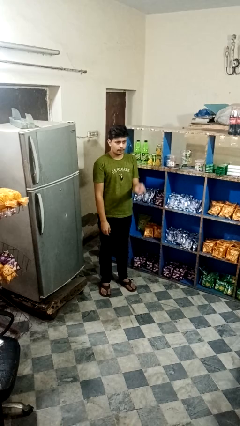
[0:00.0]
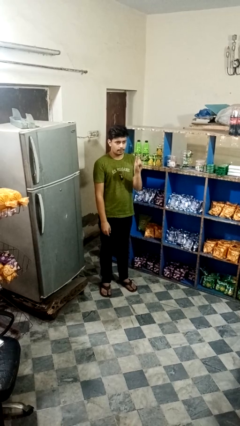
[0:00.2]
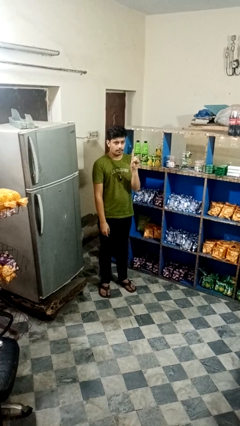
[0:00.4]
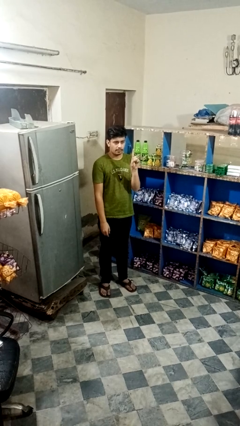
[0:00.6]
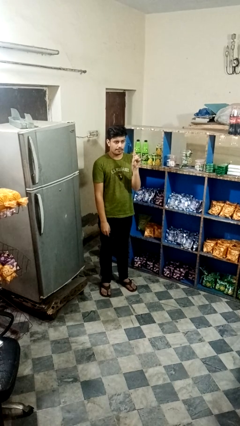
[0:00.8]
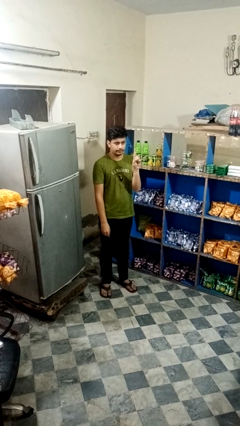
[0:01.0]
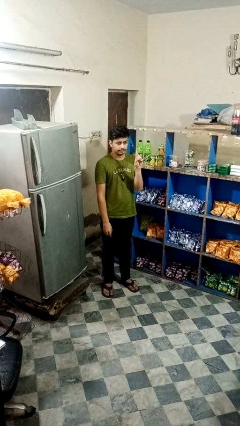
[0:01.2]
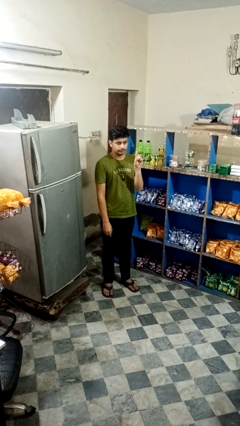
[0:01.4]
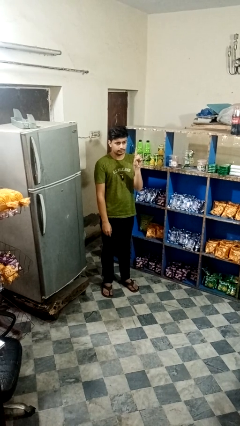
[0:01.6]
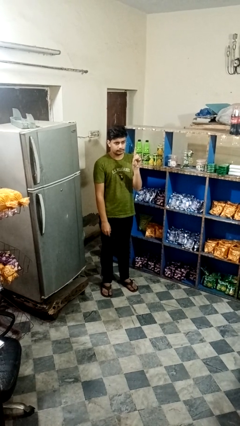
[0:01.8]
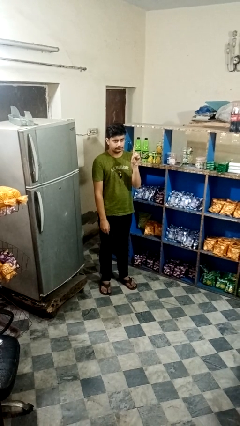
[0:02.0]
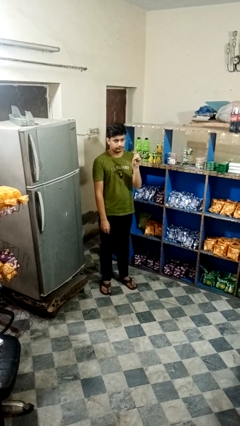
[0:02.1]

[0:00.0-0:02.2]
person gestures number one

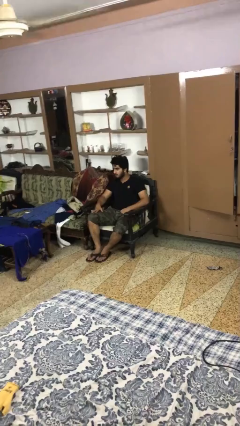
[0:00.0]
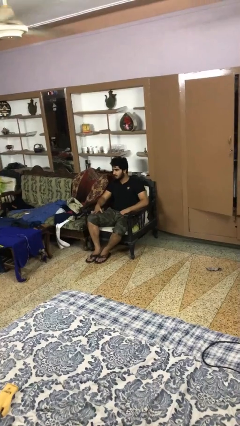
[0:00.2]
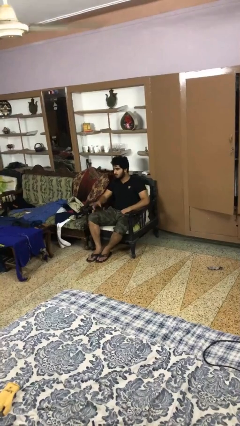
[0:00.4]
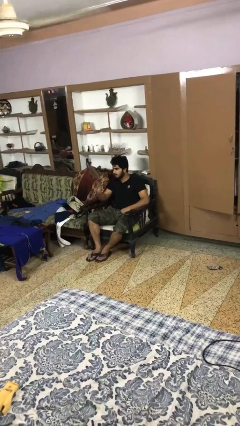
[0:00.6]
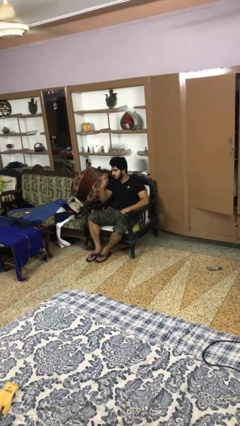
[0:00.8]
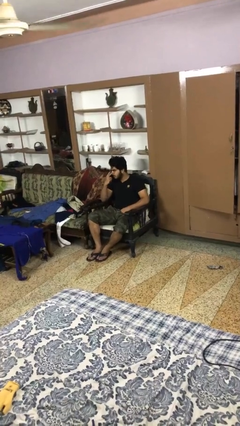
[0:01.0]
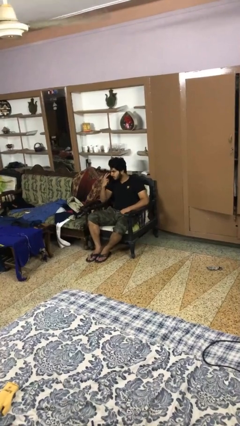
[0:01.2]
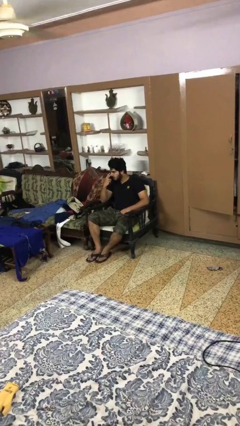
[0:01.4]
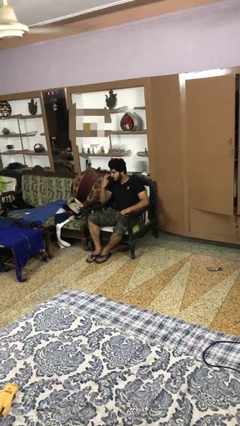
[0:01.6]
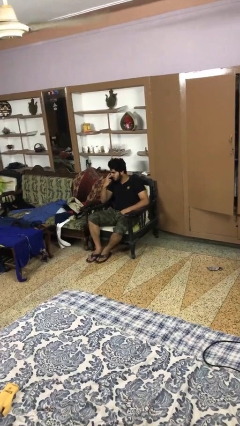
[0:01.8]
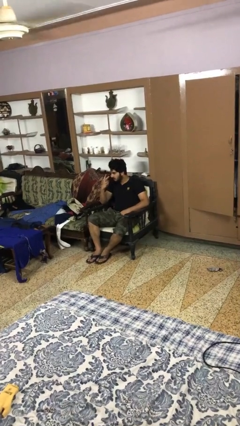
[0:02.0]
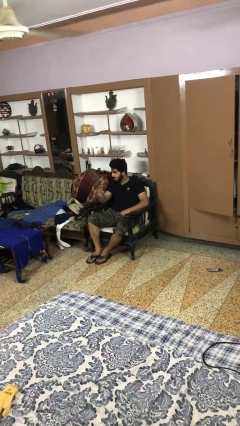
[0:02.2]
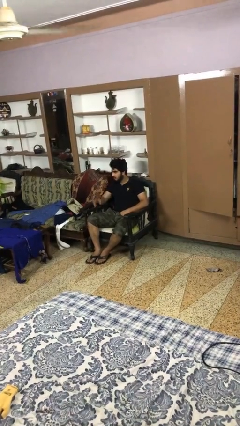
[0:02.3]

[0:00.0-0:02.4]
person gestures watch closely

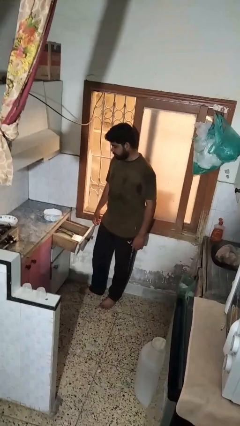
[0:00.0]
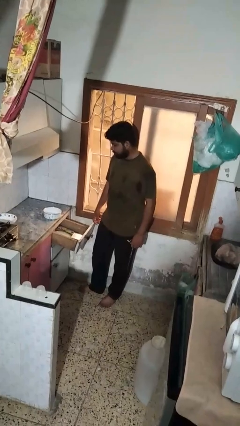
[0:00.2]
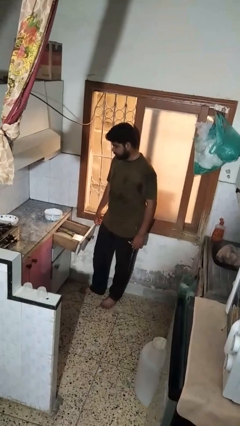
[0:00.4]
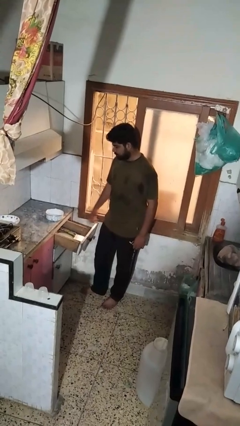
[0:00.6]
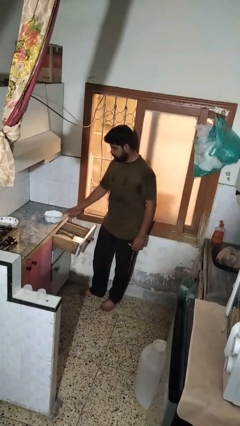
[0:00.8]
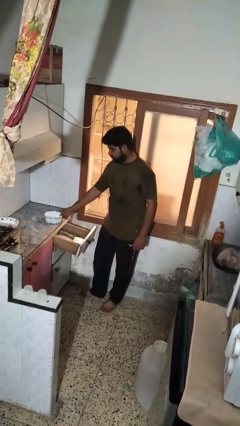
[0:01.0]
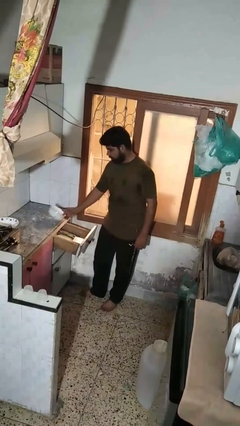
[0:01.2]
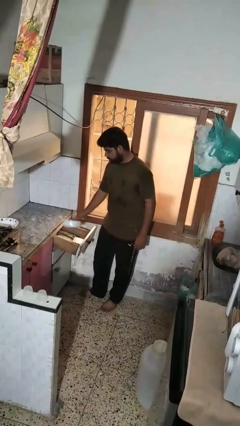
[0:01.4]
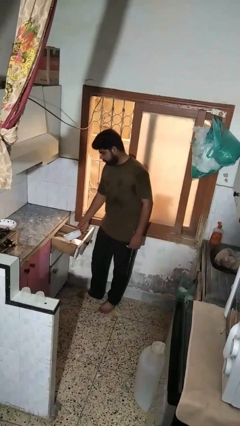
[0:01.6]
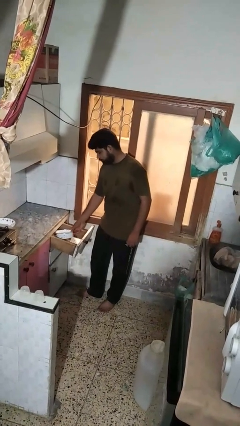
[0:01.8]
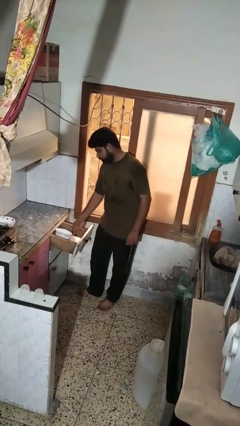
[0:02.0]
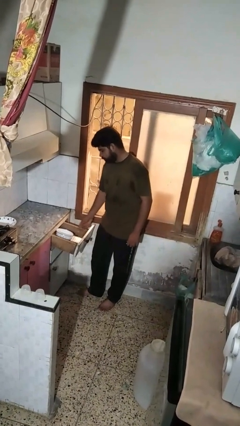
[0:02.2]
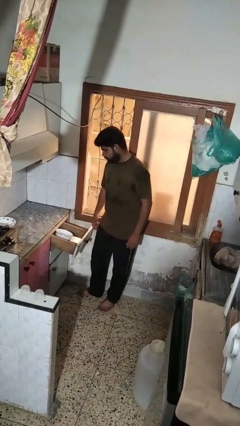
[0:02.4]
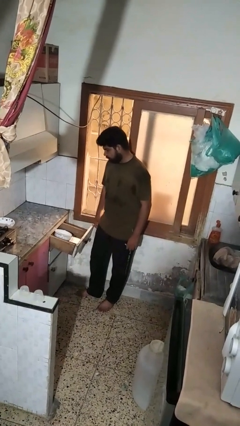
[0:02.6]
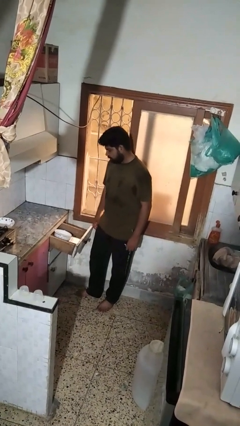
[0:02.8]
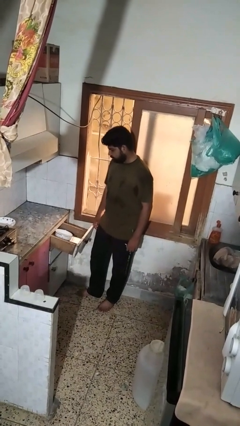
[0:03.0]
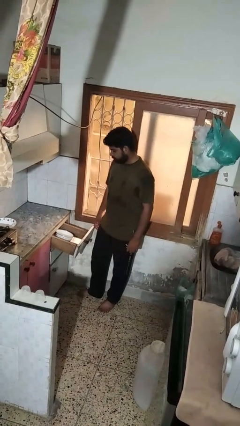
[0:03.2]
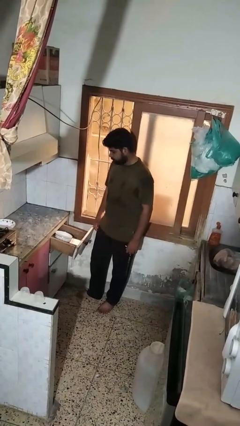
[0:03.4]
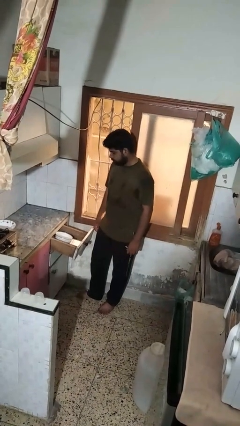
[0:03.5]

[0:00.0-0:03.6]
person puts object into kitchen drawer

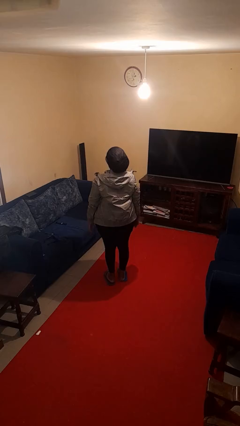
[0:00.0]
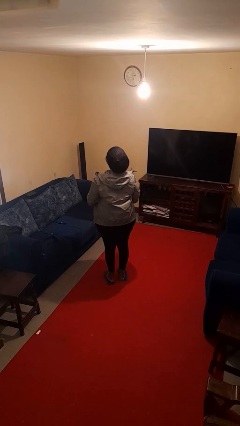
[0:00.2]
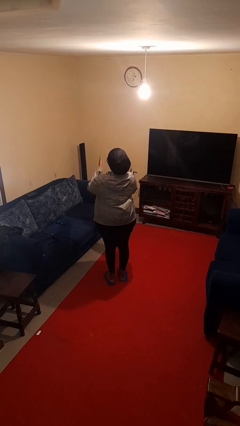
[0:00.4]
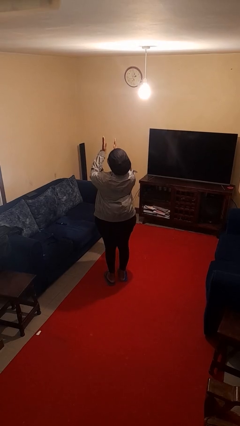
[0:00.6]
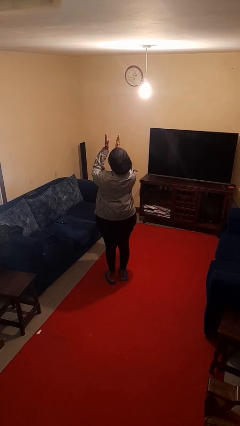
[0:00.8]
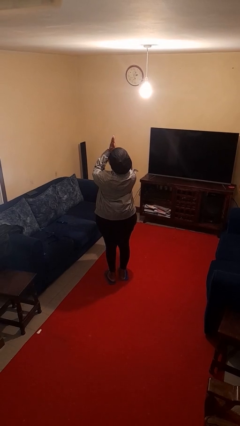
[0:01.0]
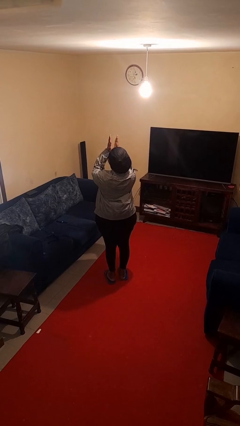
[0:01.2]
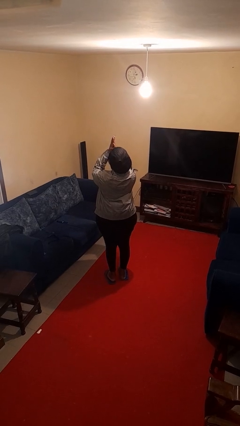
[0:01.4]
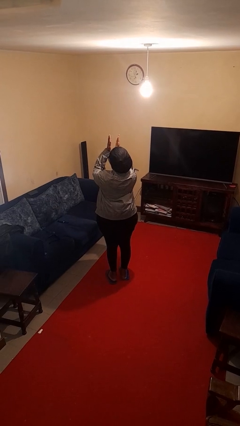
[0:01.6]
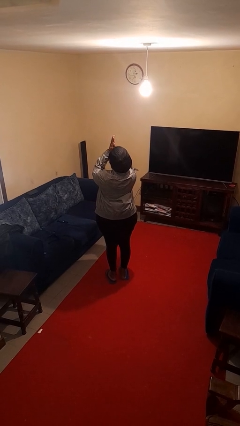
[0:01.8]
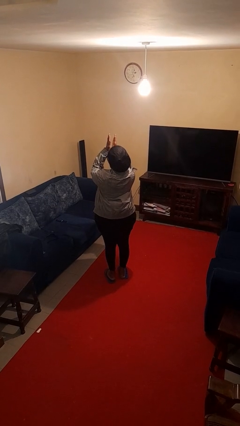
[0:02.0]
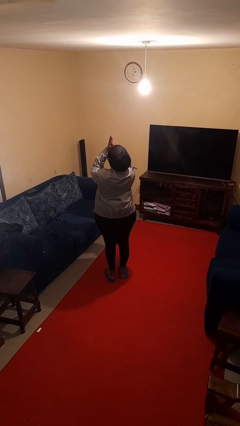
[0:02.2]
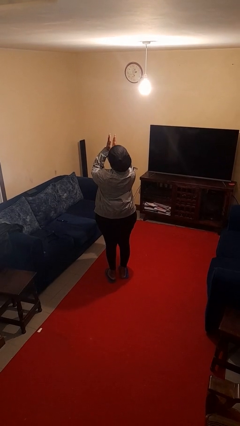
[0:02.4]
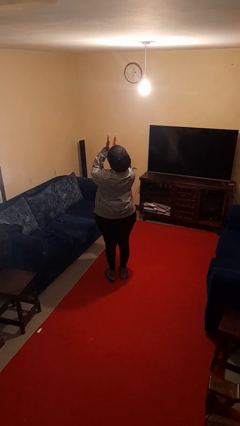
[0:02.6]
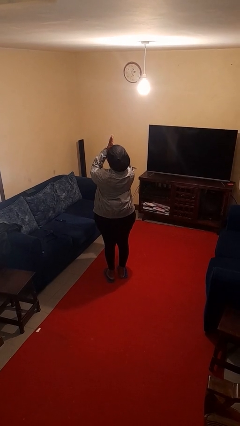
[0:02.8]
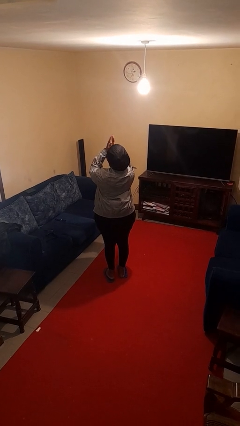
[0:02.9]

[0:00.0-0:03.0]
person claps hands

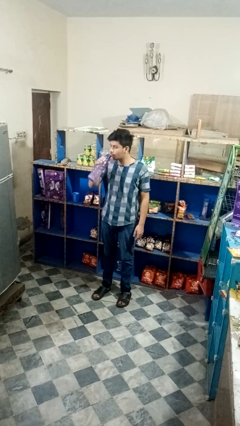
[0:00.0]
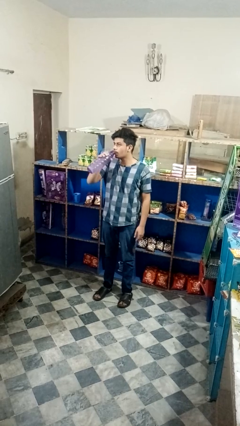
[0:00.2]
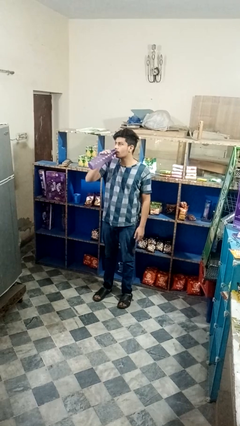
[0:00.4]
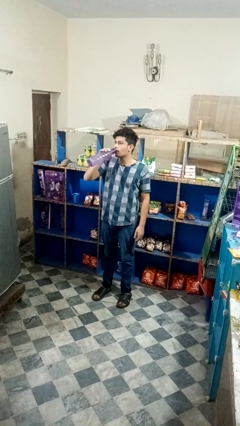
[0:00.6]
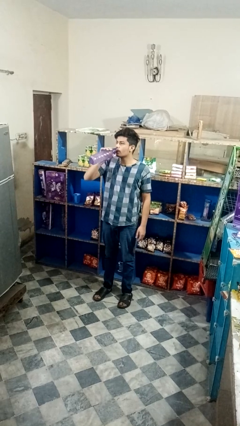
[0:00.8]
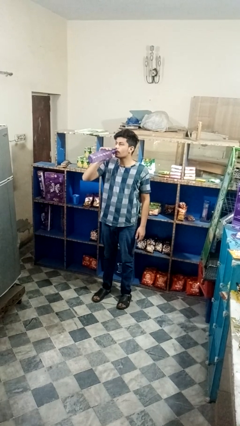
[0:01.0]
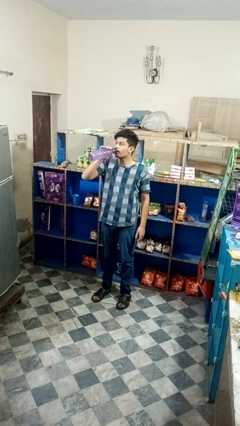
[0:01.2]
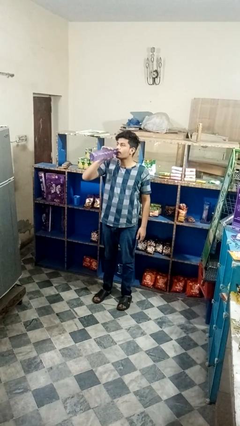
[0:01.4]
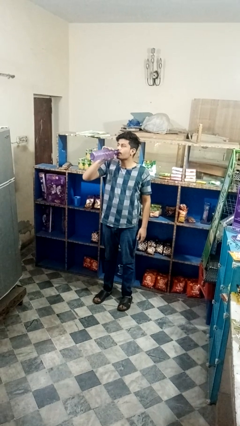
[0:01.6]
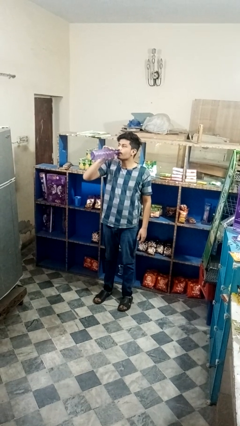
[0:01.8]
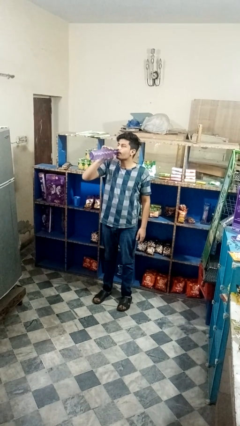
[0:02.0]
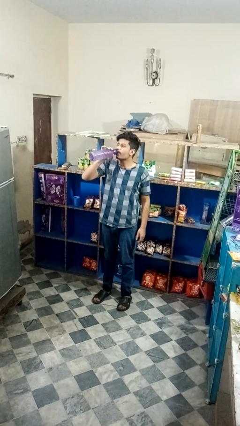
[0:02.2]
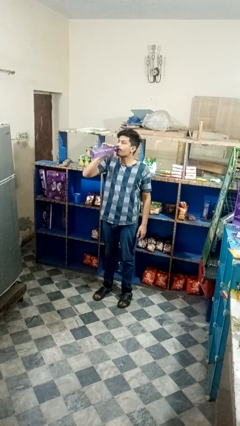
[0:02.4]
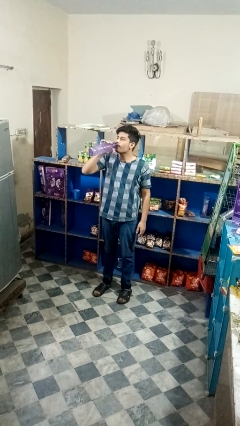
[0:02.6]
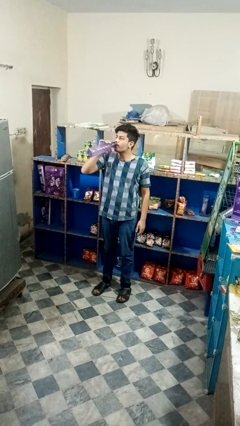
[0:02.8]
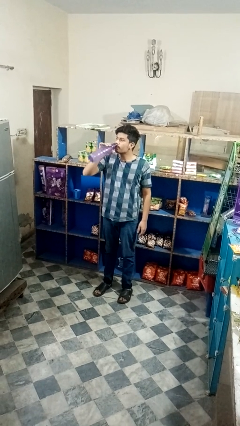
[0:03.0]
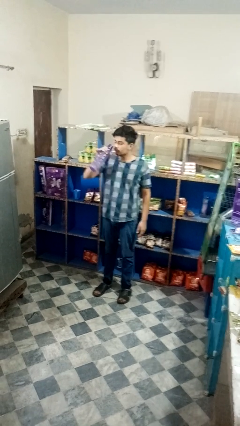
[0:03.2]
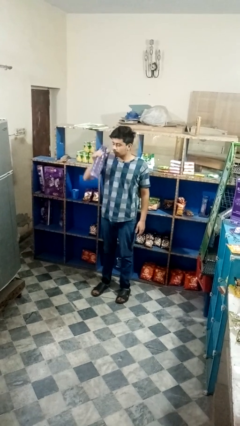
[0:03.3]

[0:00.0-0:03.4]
person drinks from bottle

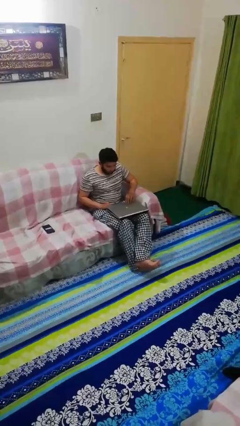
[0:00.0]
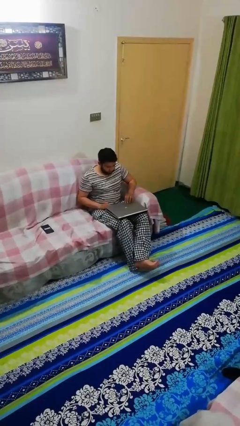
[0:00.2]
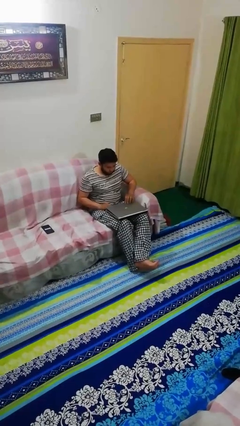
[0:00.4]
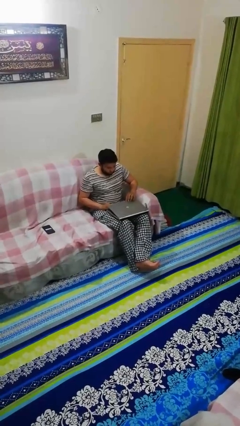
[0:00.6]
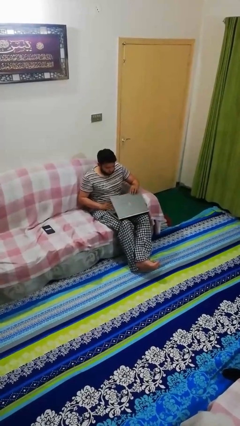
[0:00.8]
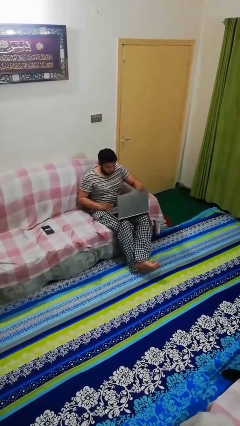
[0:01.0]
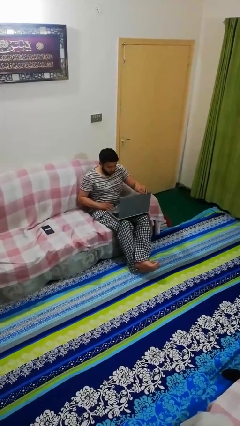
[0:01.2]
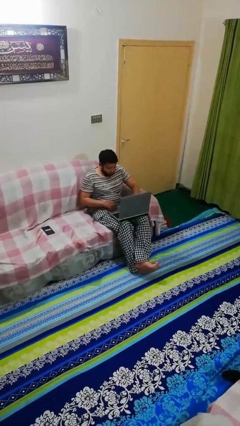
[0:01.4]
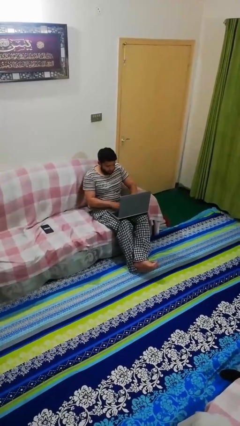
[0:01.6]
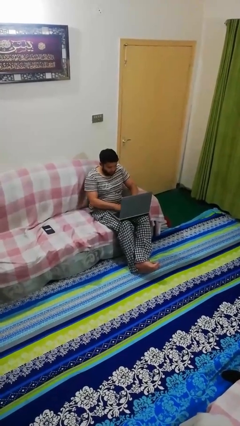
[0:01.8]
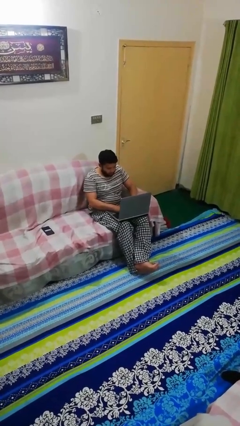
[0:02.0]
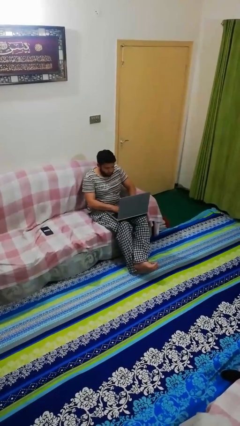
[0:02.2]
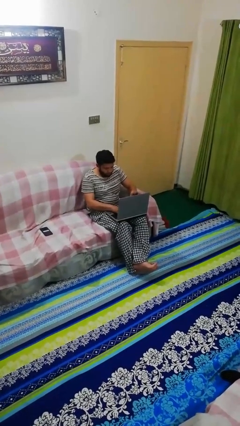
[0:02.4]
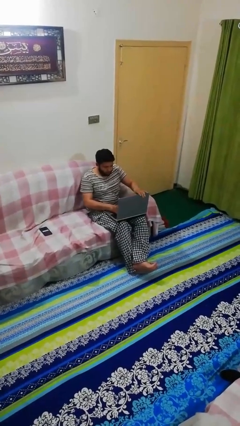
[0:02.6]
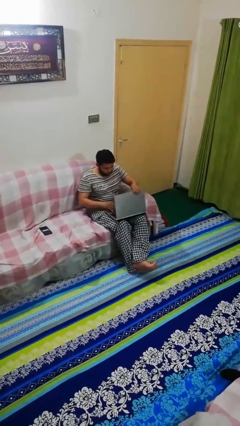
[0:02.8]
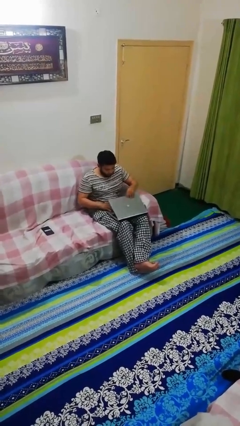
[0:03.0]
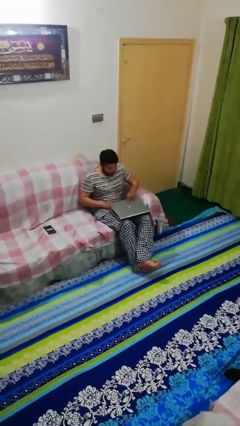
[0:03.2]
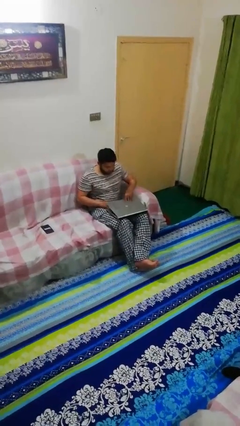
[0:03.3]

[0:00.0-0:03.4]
person interacts with laptop
